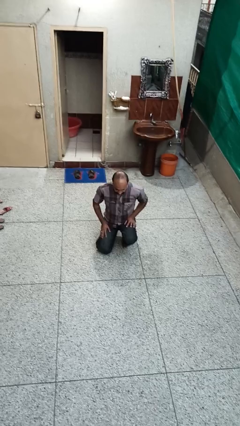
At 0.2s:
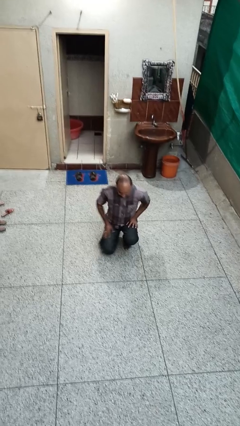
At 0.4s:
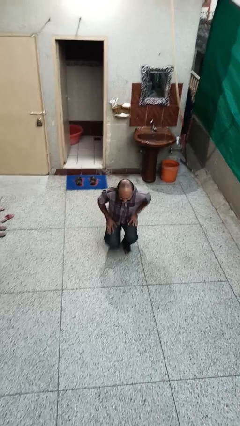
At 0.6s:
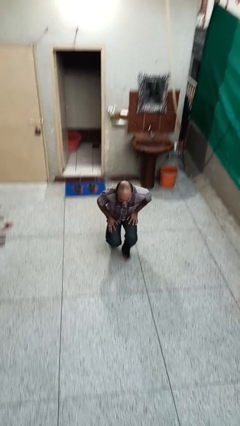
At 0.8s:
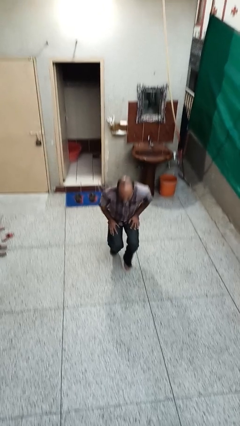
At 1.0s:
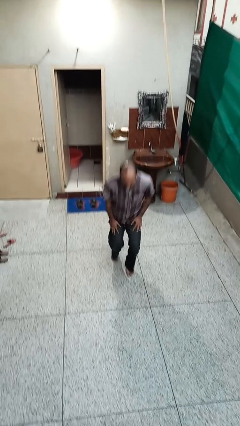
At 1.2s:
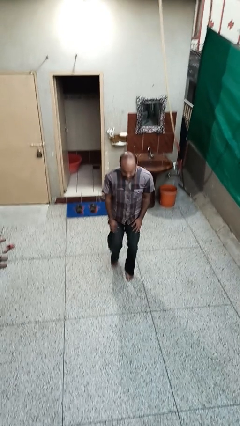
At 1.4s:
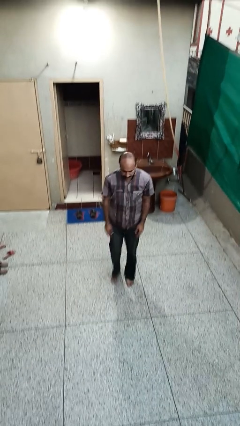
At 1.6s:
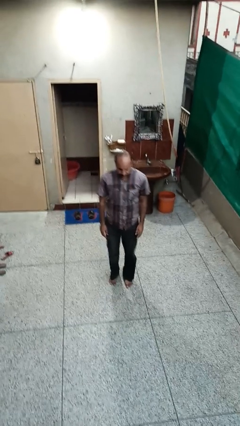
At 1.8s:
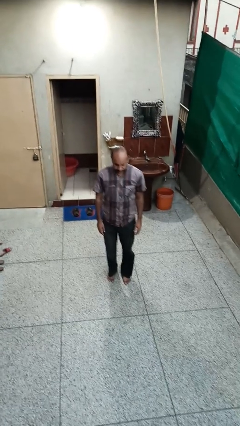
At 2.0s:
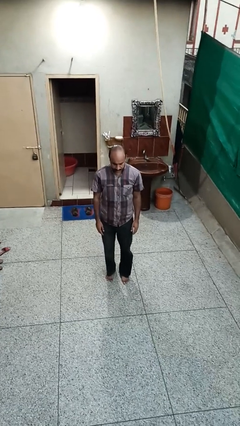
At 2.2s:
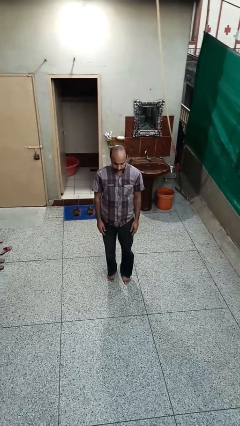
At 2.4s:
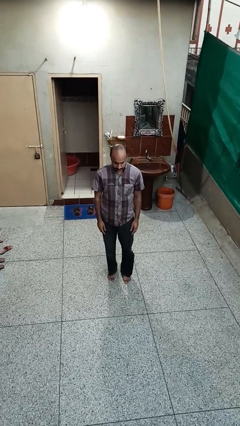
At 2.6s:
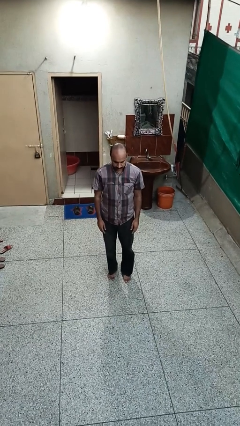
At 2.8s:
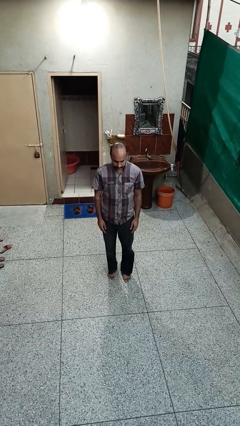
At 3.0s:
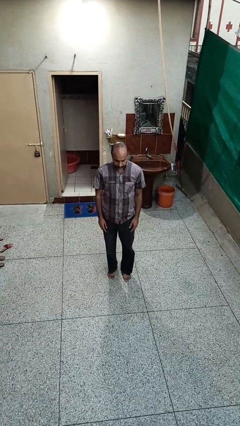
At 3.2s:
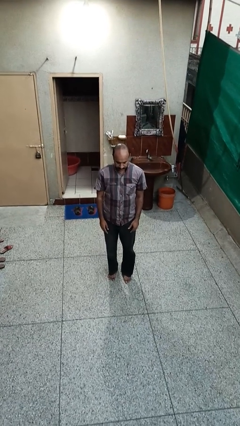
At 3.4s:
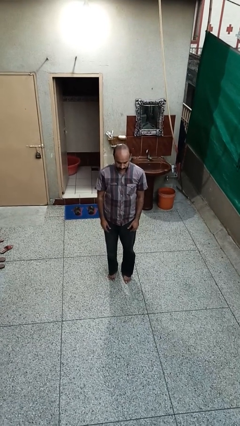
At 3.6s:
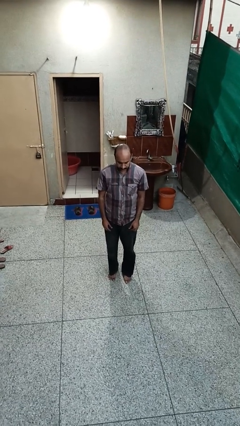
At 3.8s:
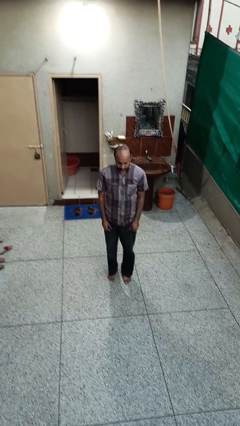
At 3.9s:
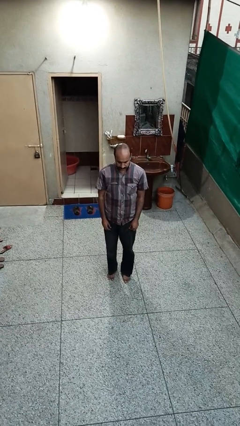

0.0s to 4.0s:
person stands up from floor

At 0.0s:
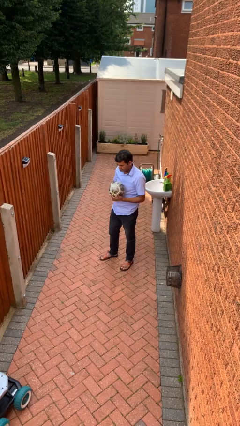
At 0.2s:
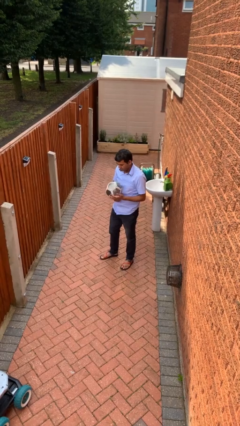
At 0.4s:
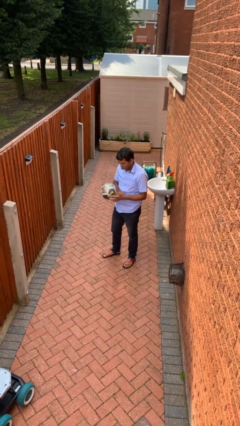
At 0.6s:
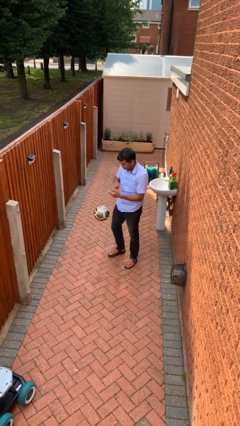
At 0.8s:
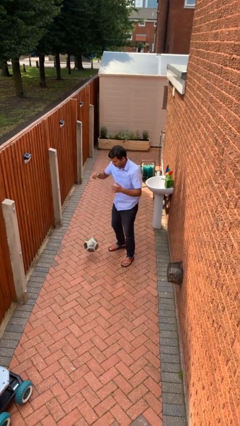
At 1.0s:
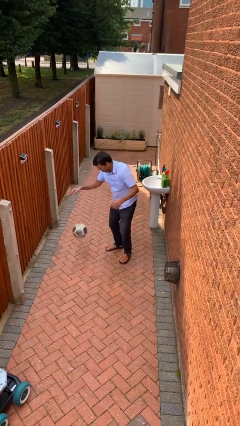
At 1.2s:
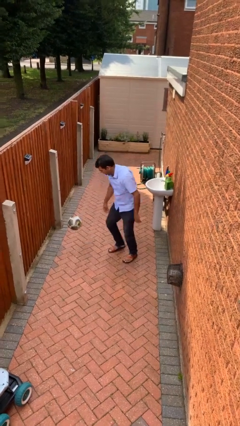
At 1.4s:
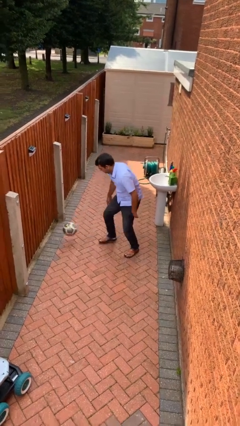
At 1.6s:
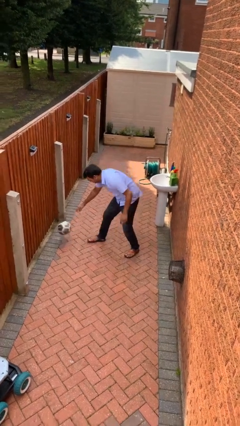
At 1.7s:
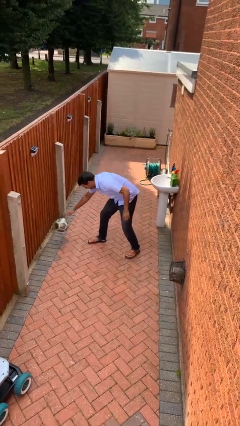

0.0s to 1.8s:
person drops object

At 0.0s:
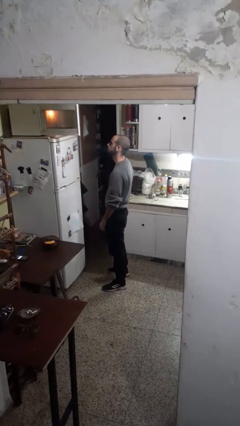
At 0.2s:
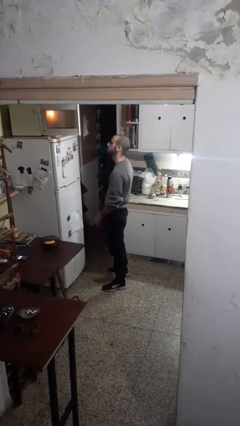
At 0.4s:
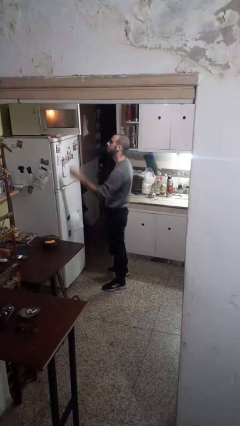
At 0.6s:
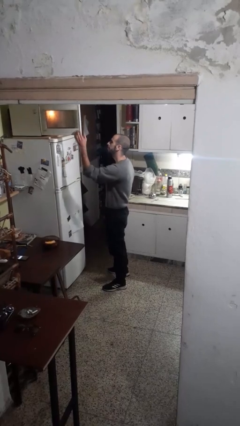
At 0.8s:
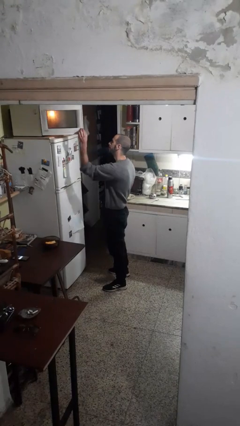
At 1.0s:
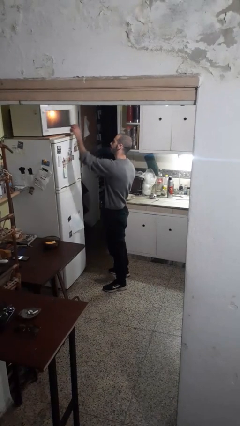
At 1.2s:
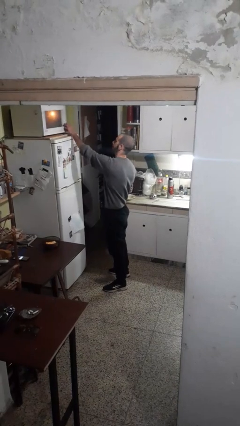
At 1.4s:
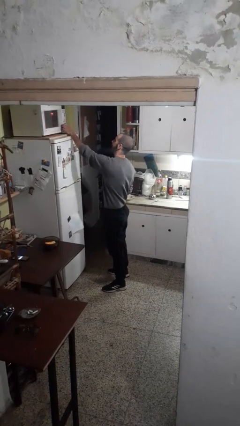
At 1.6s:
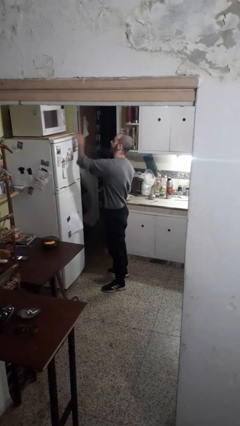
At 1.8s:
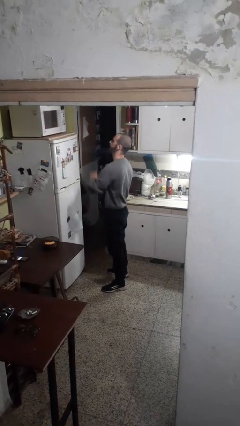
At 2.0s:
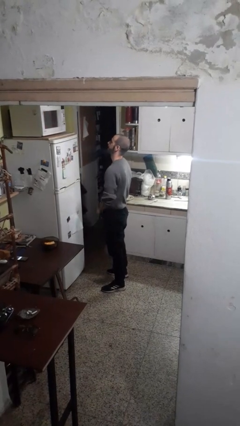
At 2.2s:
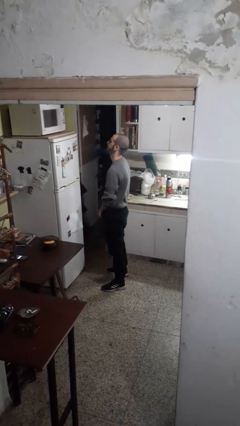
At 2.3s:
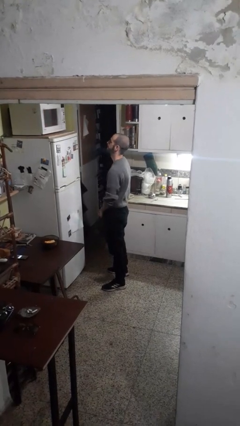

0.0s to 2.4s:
person closes microwave

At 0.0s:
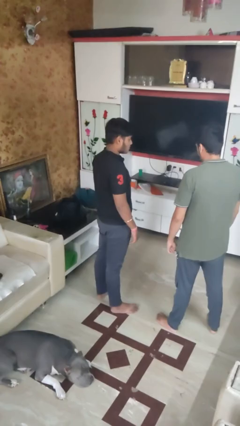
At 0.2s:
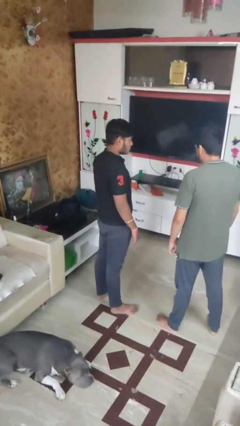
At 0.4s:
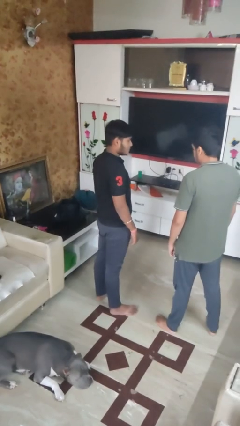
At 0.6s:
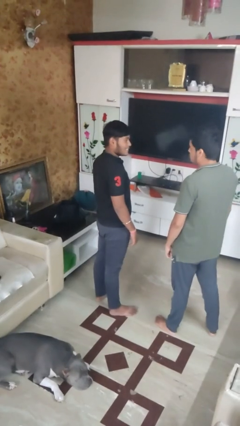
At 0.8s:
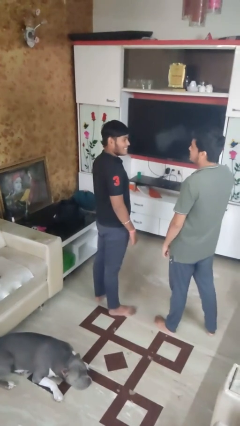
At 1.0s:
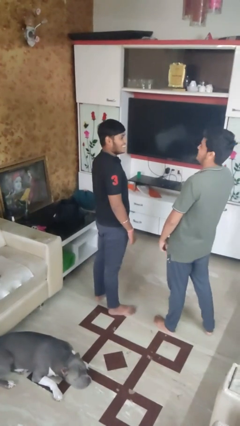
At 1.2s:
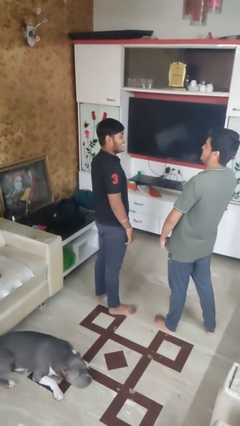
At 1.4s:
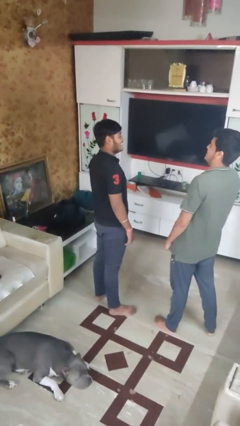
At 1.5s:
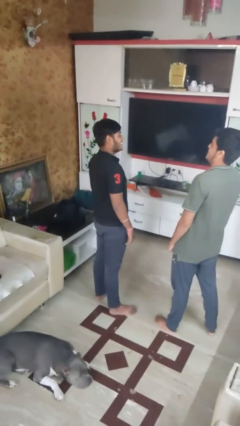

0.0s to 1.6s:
person laughs with person

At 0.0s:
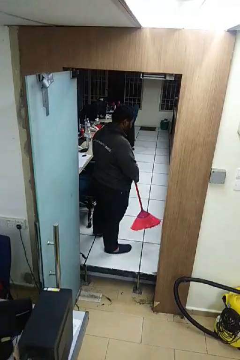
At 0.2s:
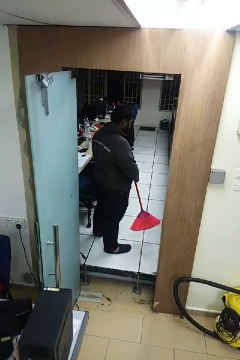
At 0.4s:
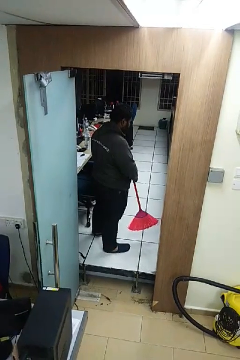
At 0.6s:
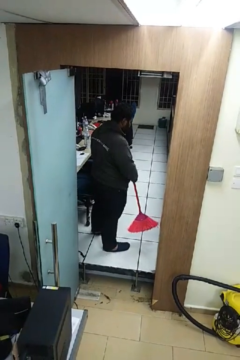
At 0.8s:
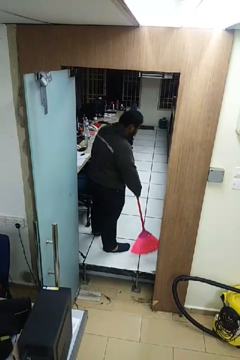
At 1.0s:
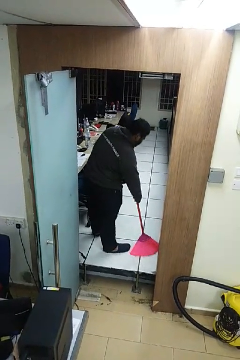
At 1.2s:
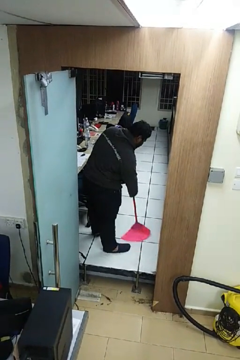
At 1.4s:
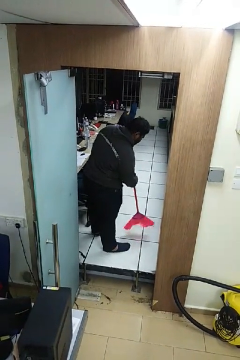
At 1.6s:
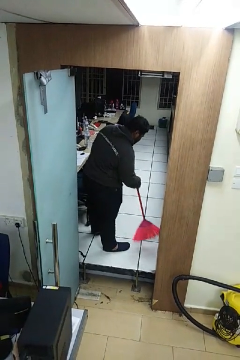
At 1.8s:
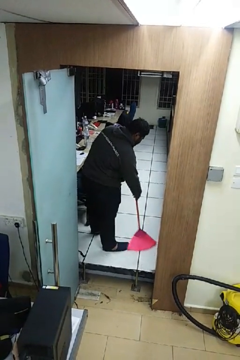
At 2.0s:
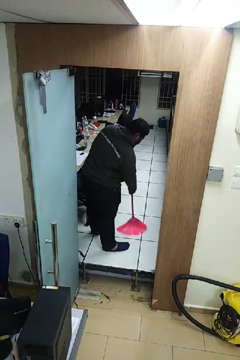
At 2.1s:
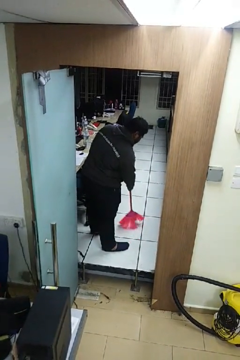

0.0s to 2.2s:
person sweeps floor

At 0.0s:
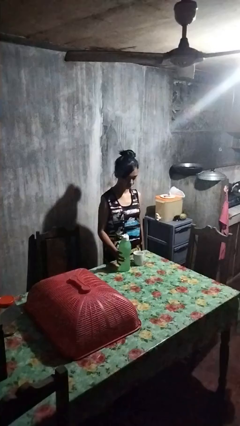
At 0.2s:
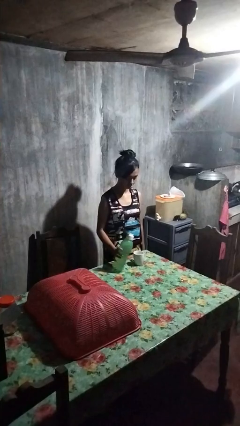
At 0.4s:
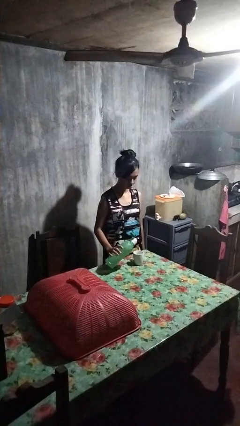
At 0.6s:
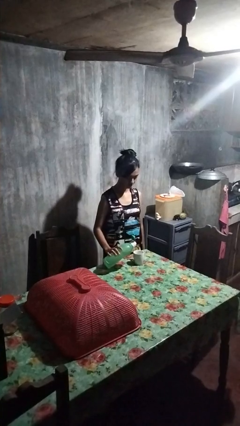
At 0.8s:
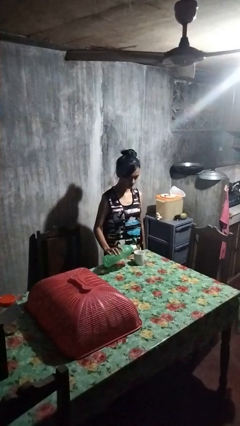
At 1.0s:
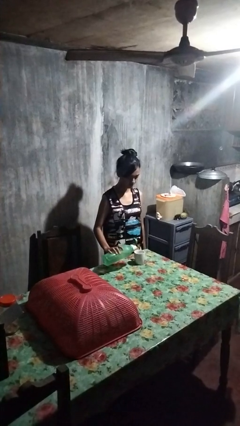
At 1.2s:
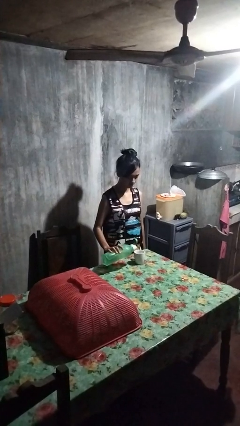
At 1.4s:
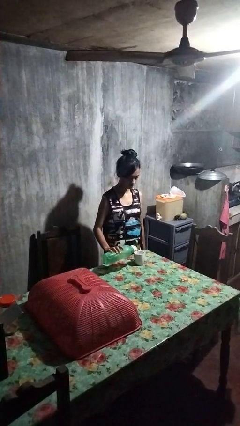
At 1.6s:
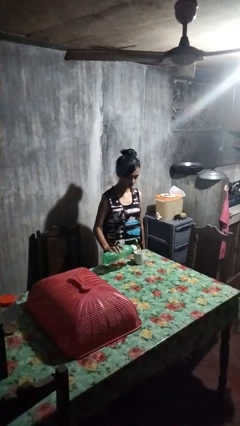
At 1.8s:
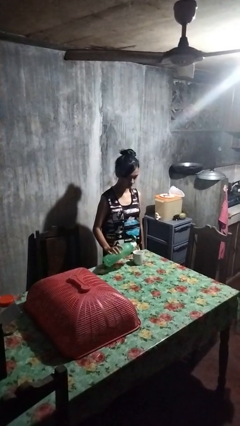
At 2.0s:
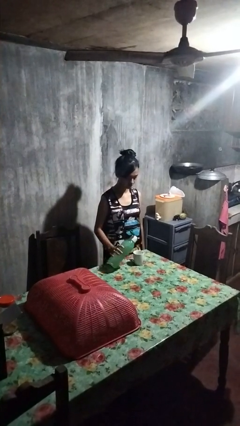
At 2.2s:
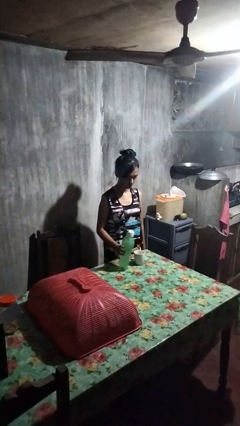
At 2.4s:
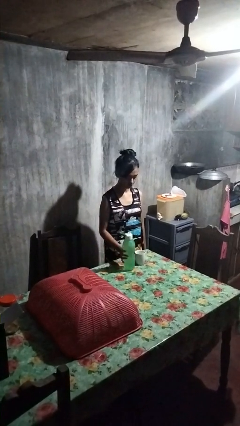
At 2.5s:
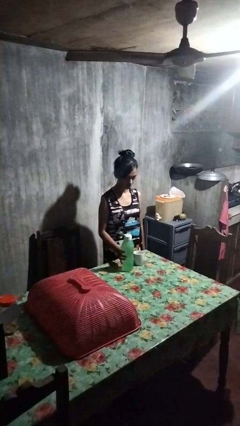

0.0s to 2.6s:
person pours liquid into cup

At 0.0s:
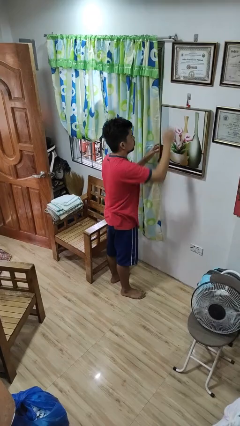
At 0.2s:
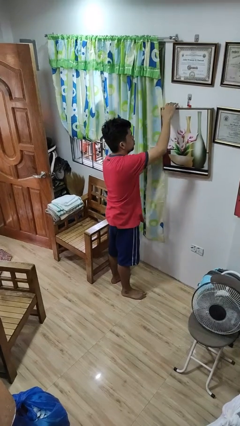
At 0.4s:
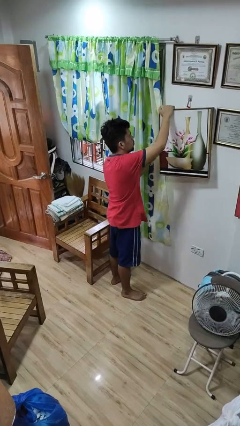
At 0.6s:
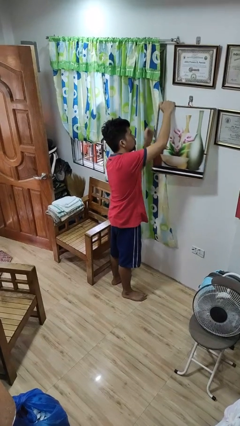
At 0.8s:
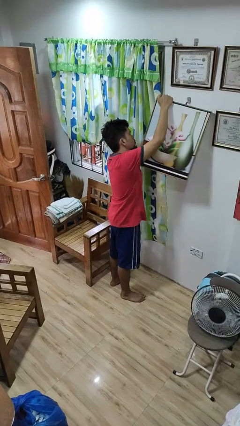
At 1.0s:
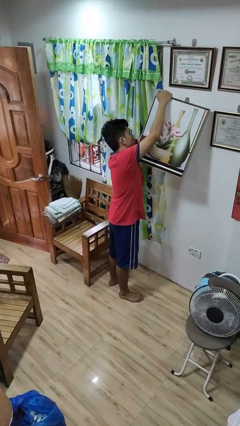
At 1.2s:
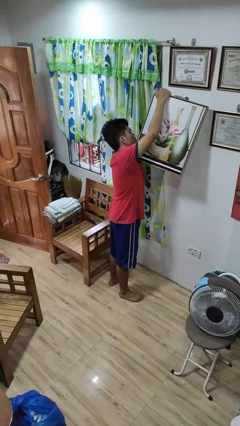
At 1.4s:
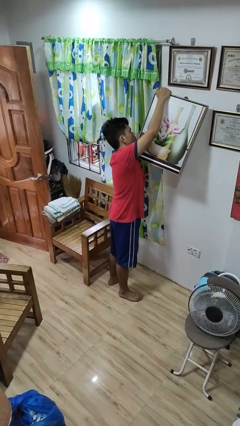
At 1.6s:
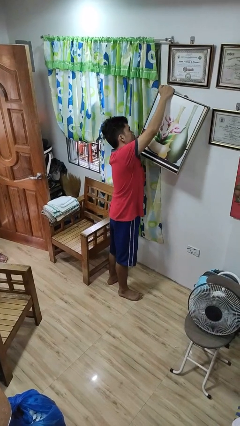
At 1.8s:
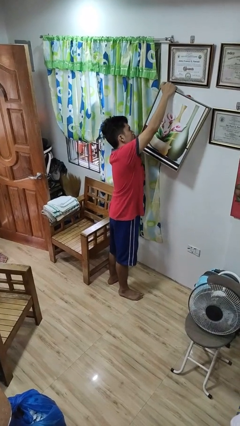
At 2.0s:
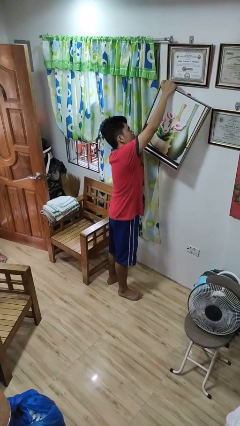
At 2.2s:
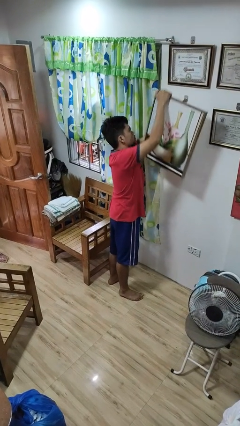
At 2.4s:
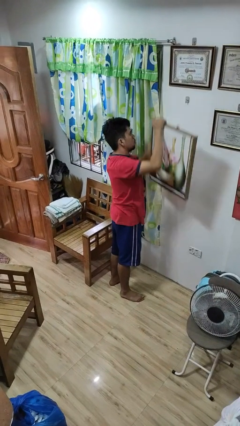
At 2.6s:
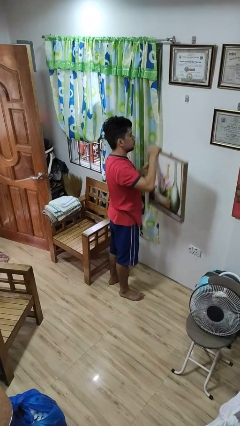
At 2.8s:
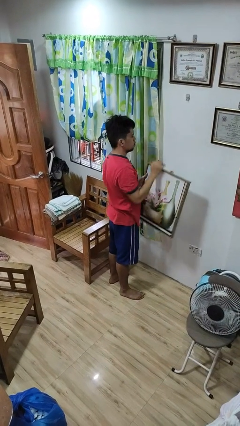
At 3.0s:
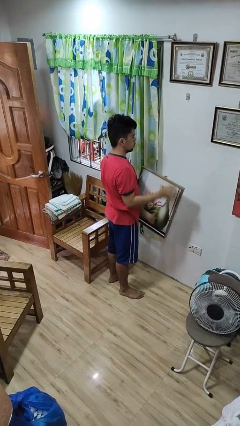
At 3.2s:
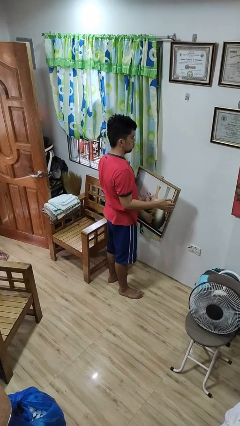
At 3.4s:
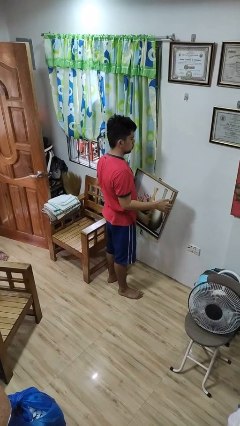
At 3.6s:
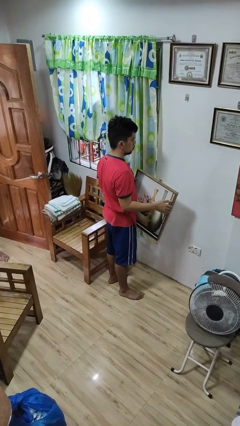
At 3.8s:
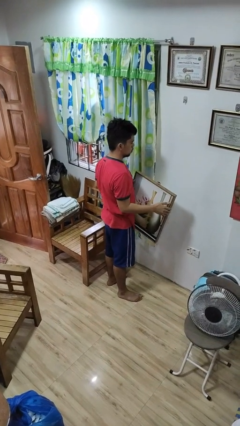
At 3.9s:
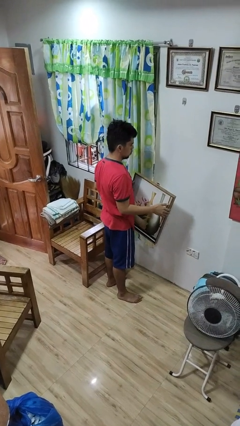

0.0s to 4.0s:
person takes down picture frame
